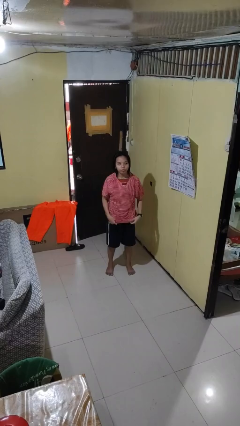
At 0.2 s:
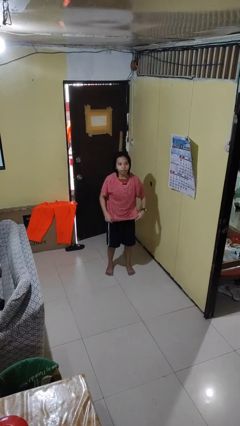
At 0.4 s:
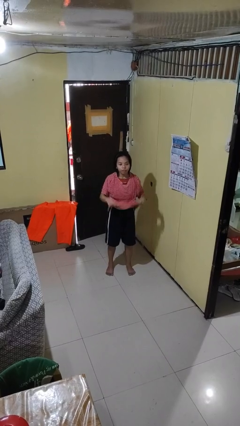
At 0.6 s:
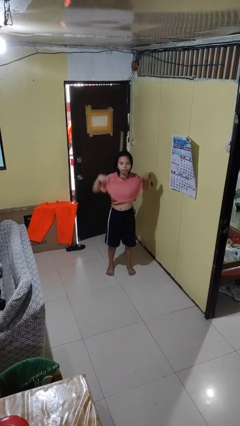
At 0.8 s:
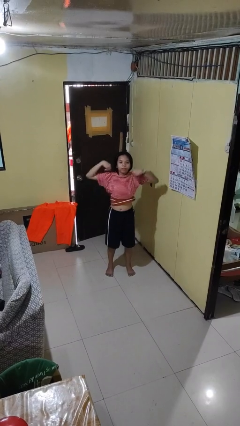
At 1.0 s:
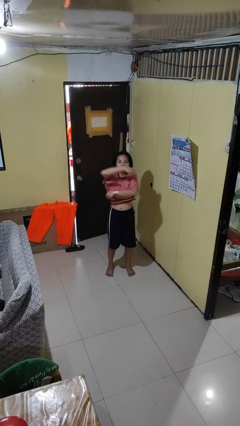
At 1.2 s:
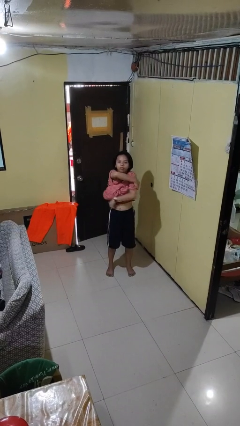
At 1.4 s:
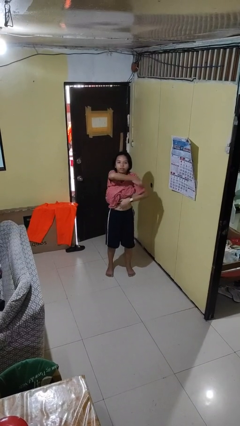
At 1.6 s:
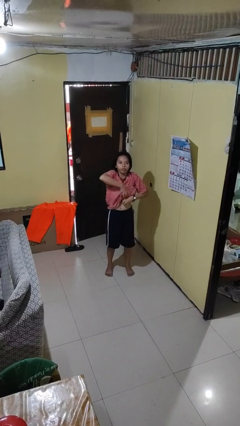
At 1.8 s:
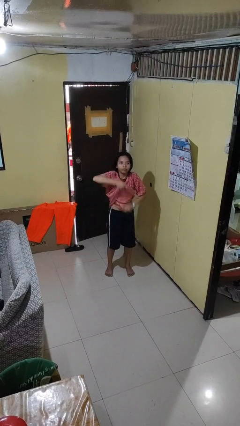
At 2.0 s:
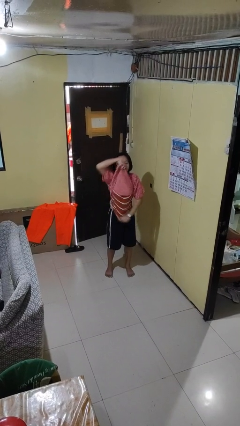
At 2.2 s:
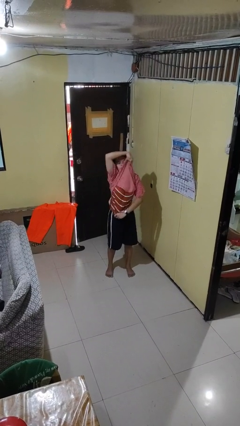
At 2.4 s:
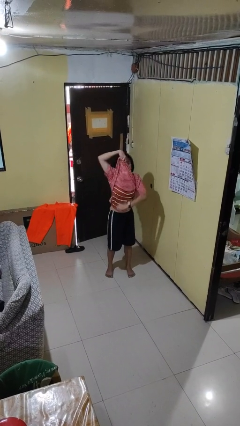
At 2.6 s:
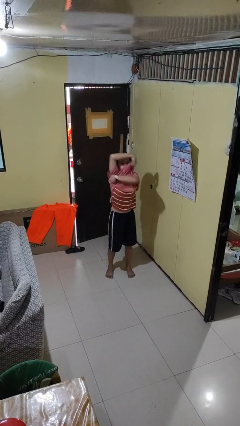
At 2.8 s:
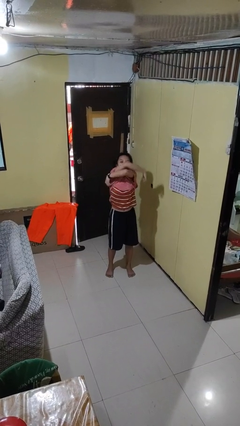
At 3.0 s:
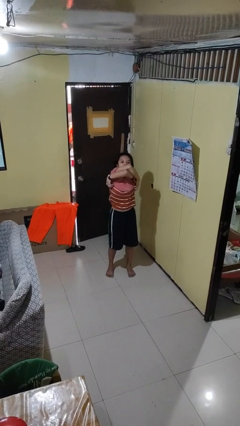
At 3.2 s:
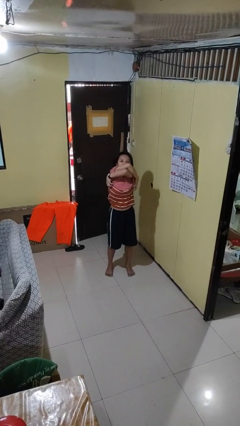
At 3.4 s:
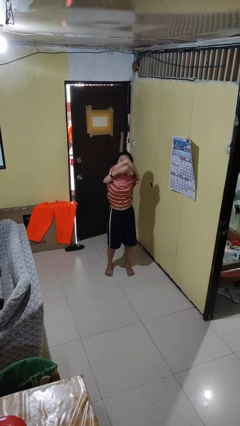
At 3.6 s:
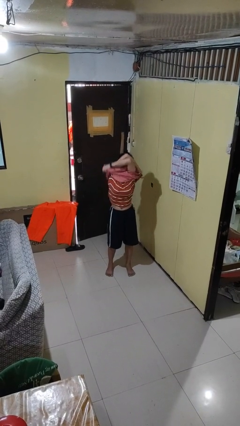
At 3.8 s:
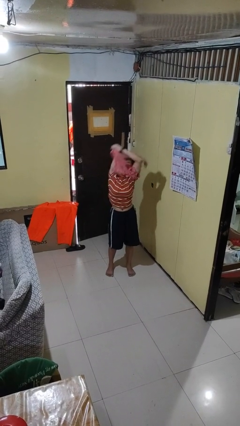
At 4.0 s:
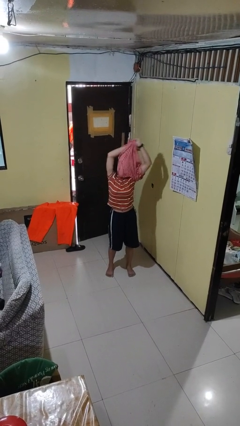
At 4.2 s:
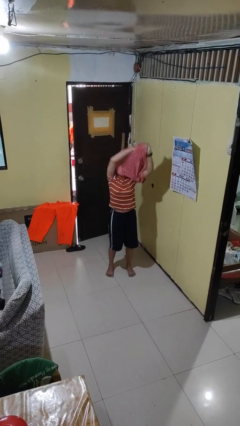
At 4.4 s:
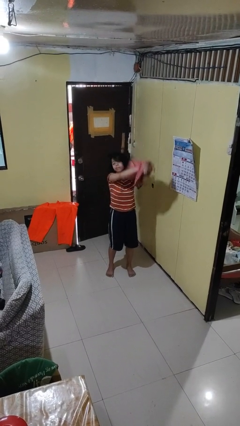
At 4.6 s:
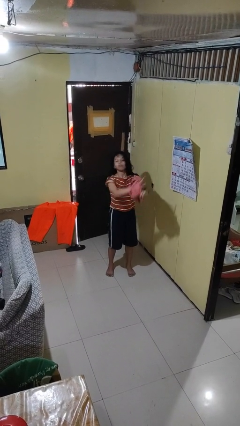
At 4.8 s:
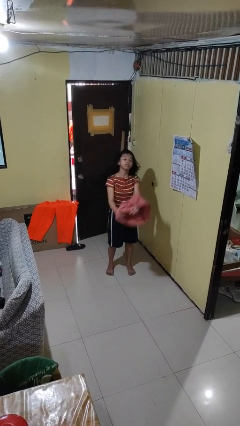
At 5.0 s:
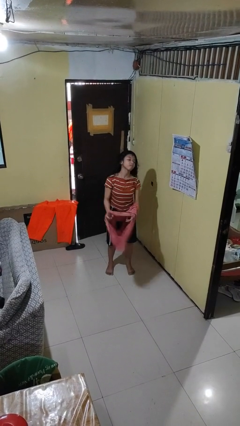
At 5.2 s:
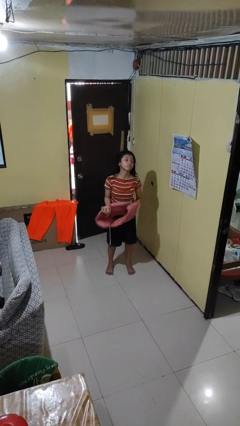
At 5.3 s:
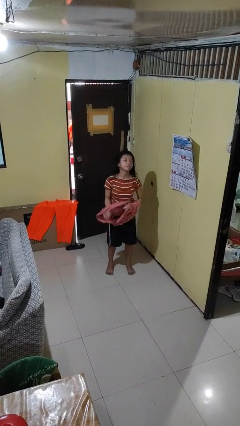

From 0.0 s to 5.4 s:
person takes off shirt

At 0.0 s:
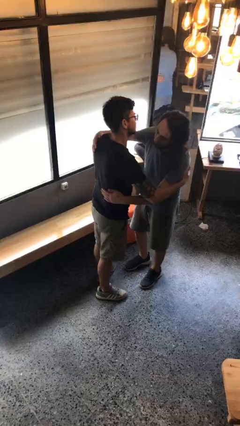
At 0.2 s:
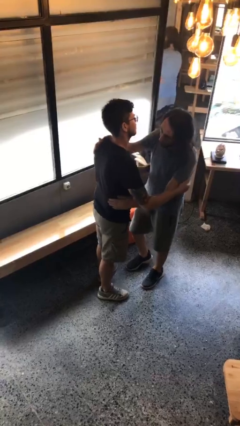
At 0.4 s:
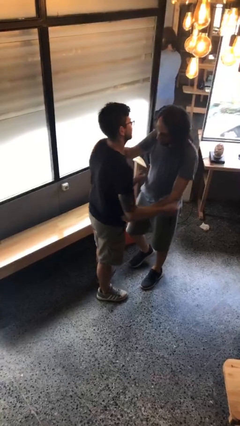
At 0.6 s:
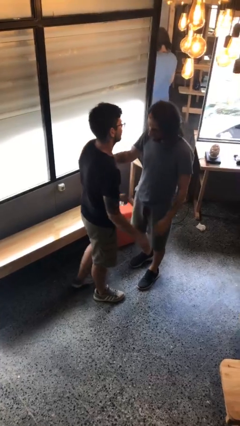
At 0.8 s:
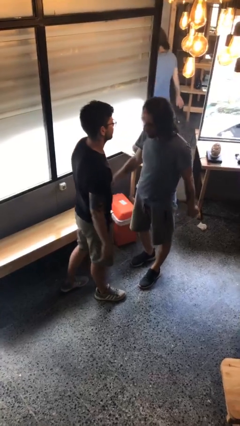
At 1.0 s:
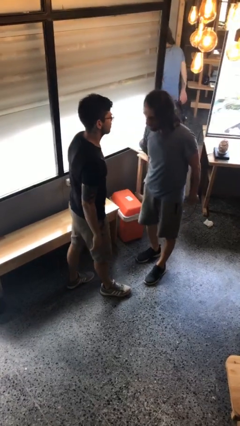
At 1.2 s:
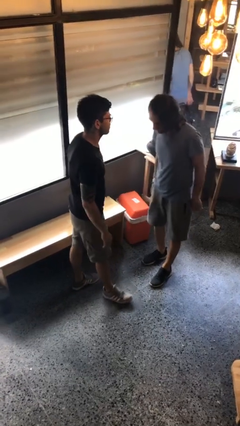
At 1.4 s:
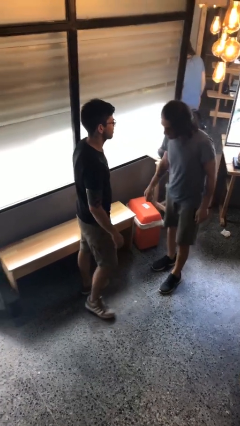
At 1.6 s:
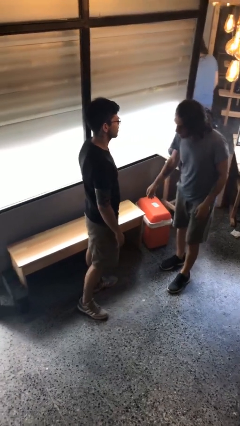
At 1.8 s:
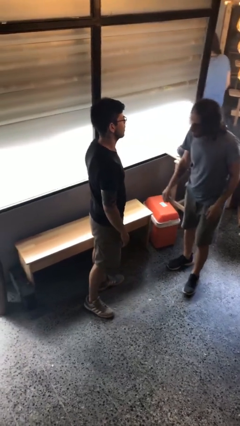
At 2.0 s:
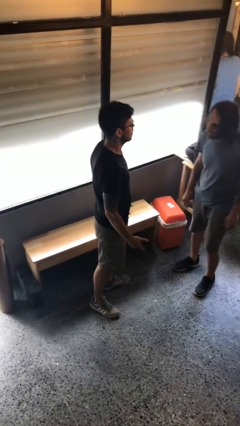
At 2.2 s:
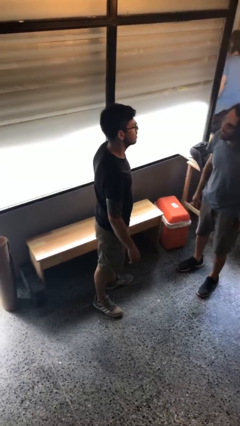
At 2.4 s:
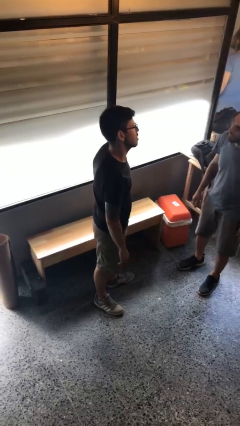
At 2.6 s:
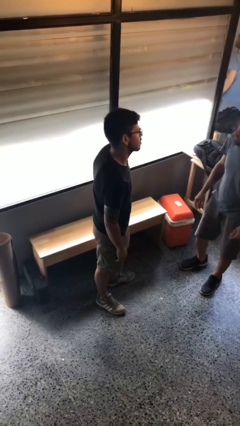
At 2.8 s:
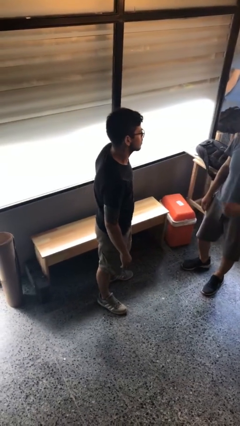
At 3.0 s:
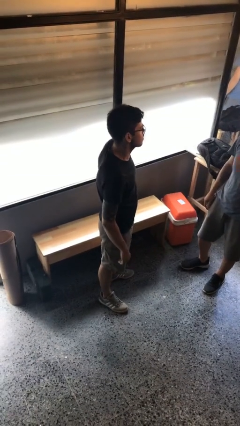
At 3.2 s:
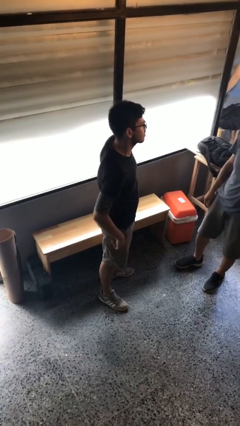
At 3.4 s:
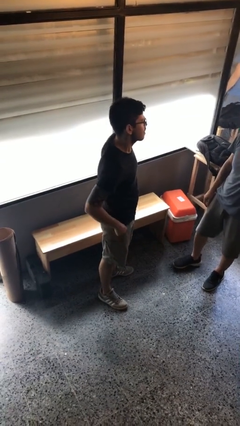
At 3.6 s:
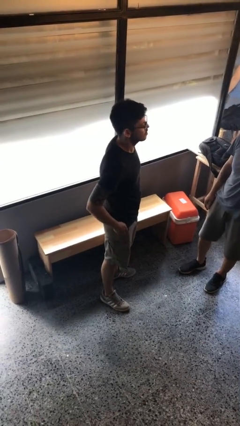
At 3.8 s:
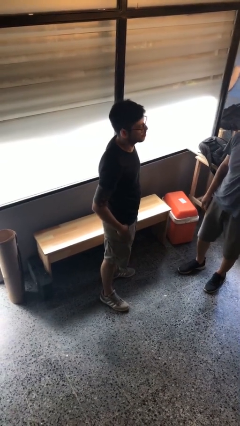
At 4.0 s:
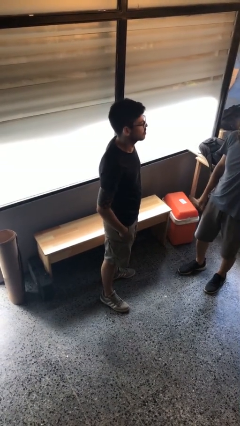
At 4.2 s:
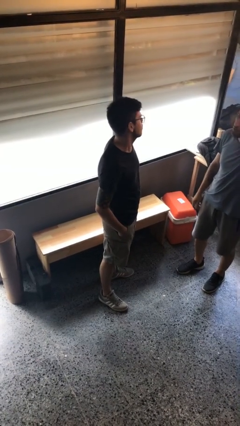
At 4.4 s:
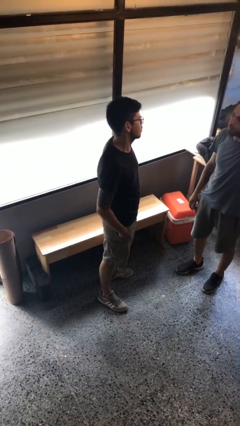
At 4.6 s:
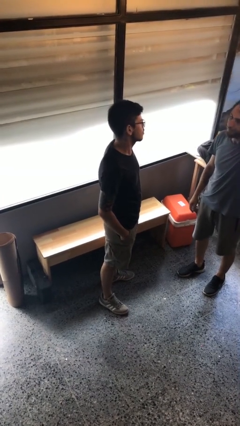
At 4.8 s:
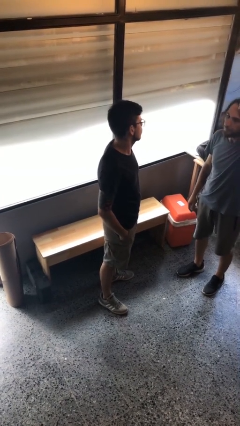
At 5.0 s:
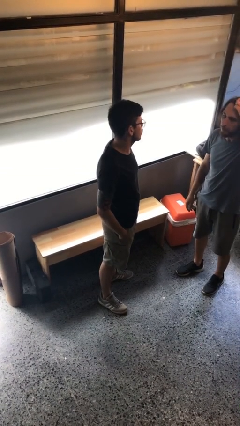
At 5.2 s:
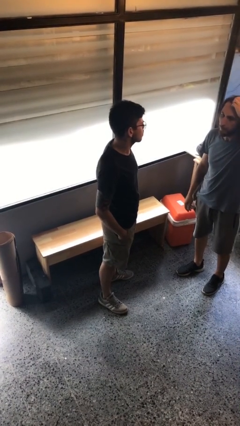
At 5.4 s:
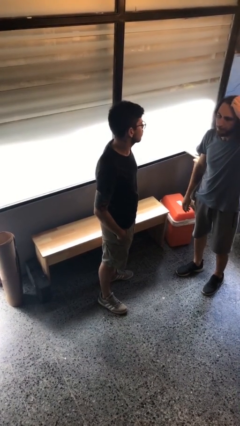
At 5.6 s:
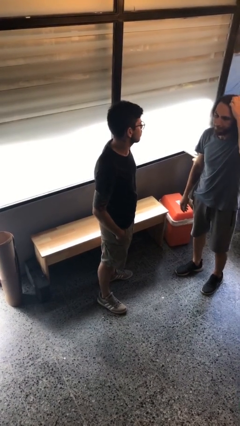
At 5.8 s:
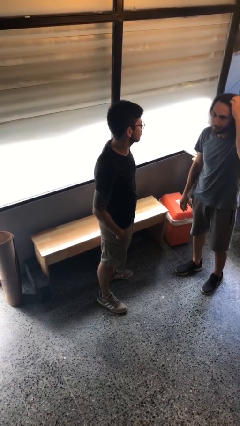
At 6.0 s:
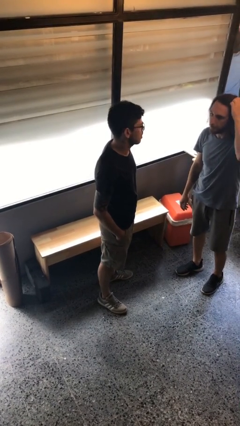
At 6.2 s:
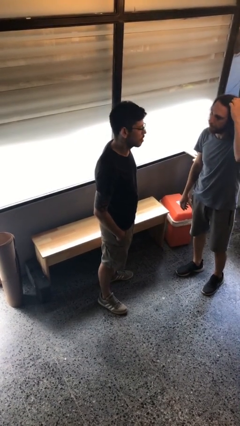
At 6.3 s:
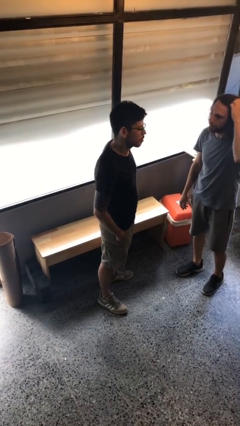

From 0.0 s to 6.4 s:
person talks to person

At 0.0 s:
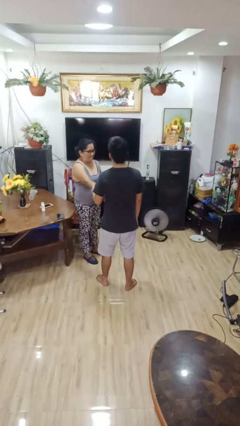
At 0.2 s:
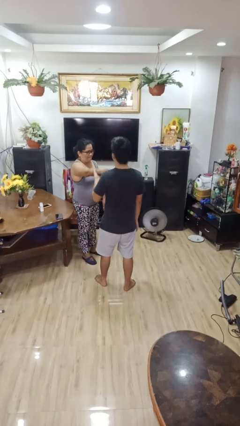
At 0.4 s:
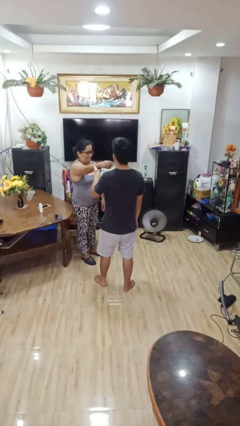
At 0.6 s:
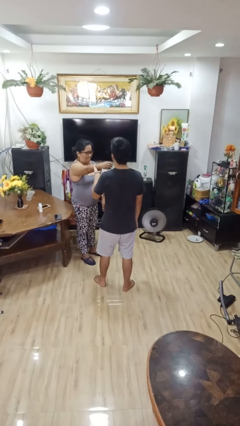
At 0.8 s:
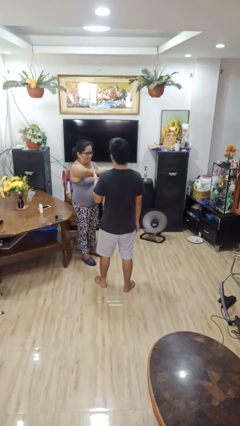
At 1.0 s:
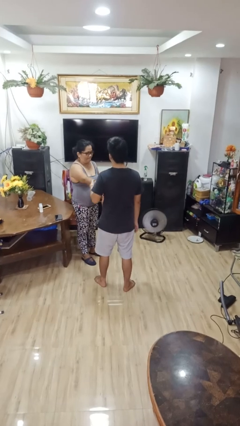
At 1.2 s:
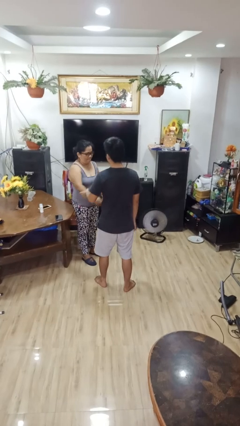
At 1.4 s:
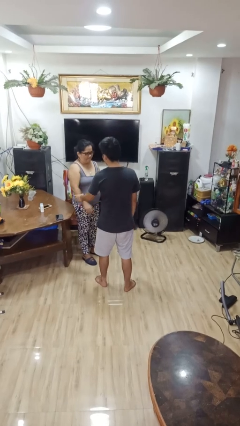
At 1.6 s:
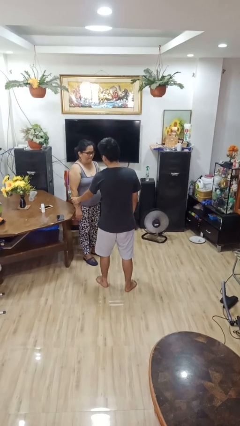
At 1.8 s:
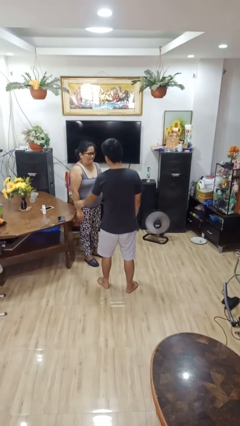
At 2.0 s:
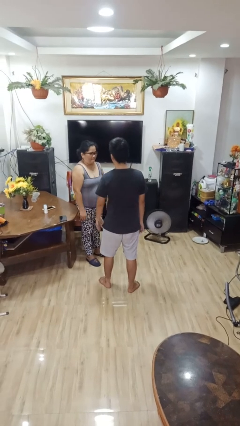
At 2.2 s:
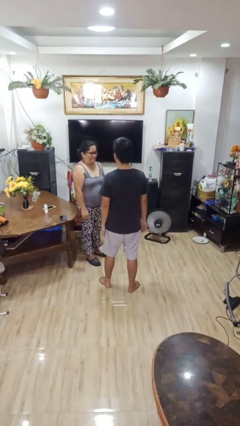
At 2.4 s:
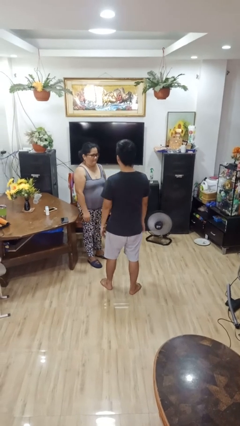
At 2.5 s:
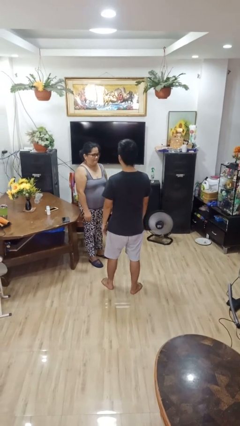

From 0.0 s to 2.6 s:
person grabs person by forearm

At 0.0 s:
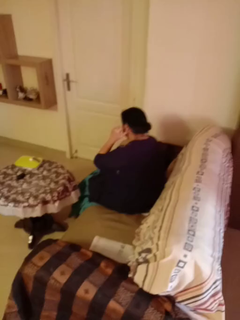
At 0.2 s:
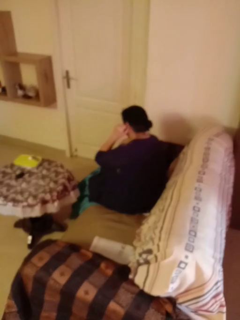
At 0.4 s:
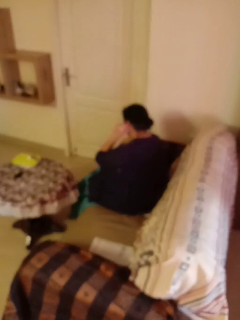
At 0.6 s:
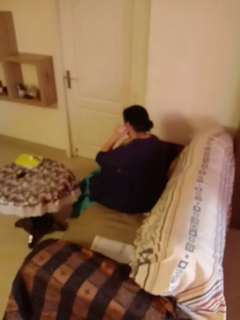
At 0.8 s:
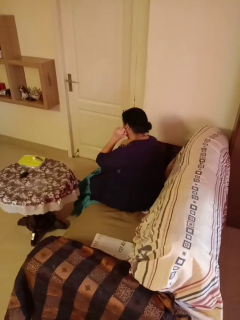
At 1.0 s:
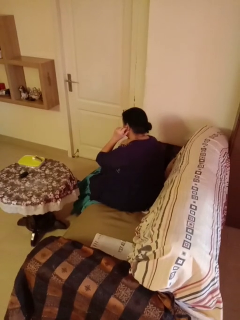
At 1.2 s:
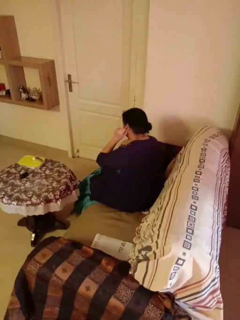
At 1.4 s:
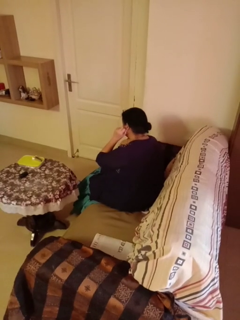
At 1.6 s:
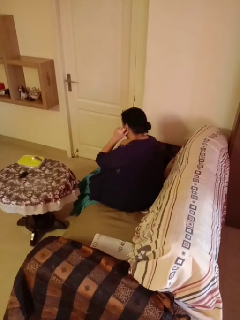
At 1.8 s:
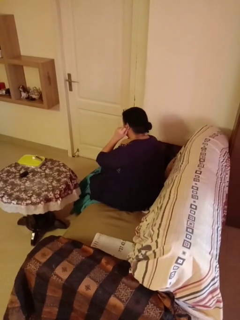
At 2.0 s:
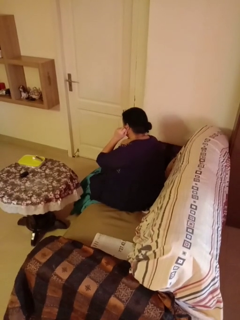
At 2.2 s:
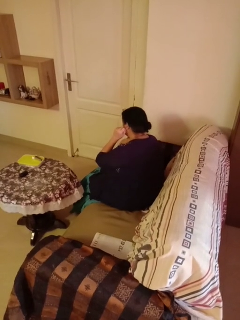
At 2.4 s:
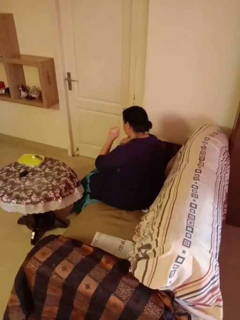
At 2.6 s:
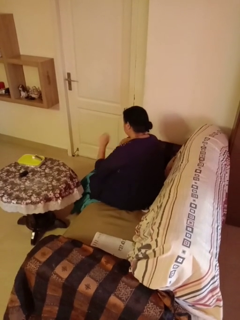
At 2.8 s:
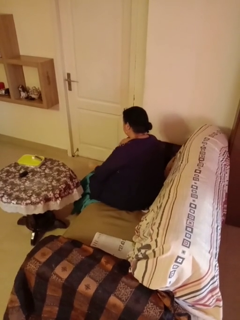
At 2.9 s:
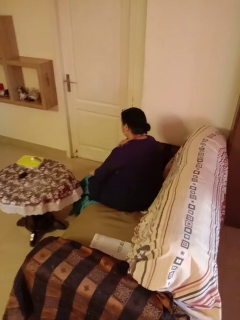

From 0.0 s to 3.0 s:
person touches earlobe

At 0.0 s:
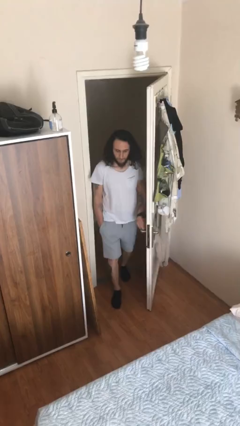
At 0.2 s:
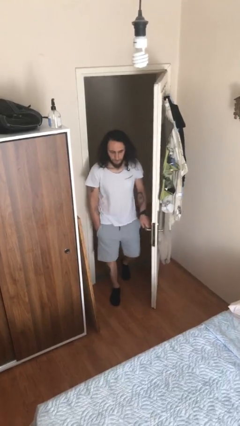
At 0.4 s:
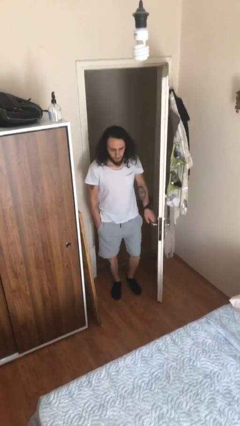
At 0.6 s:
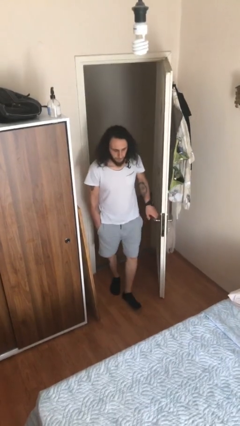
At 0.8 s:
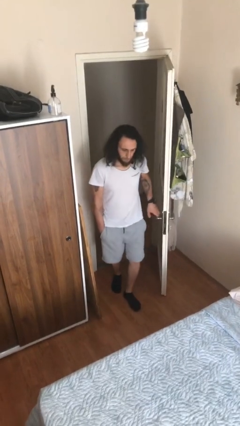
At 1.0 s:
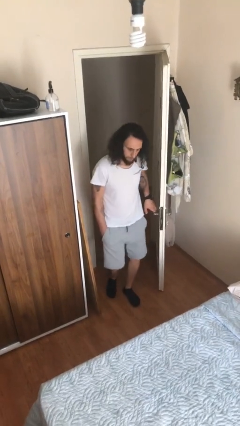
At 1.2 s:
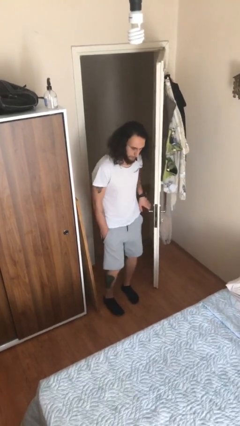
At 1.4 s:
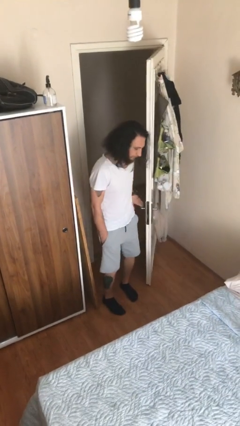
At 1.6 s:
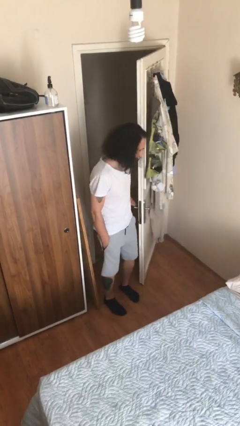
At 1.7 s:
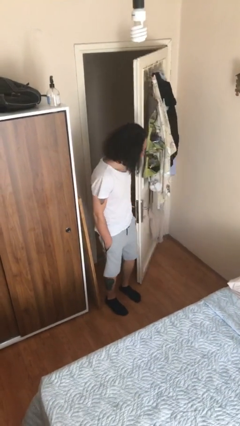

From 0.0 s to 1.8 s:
person enters scene through structure
